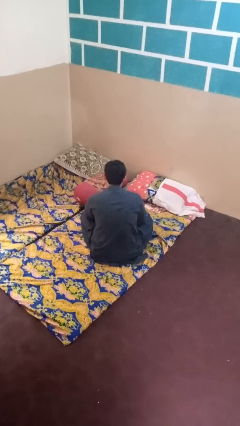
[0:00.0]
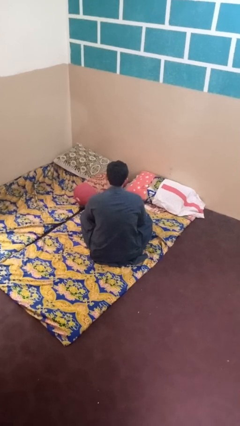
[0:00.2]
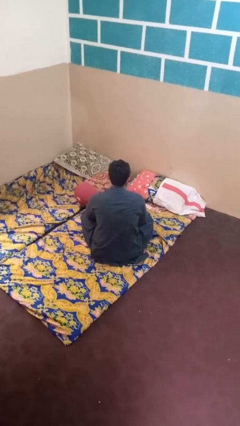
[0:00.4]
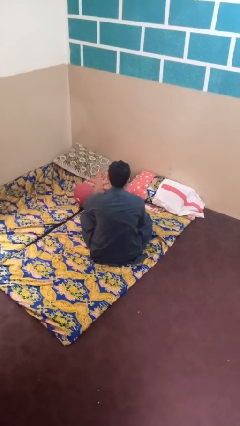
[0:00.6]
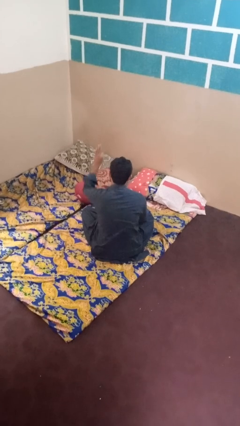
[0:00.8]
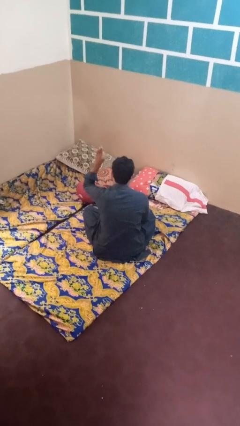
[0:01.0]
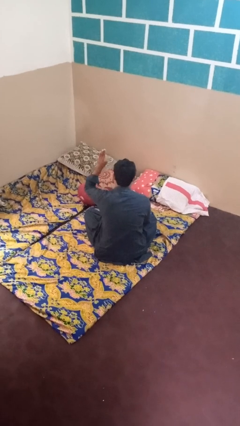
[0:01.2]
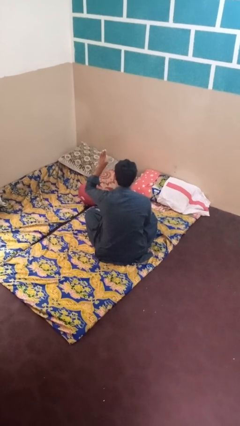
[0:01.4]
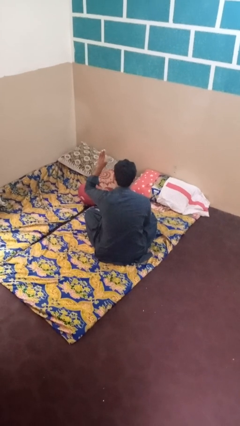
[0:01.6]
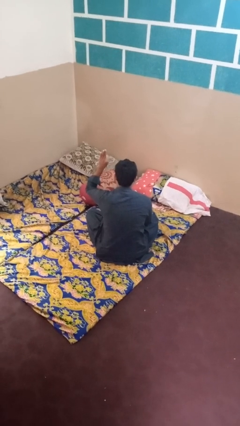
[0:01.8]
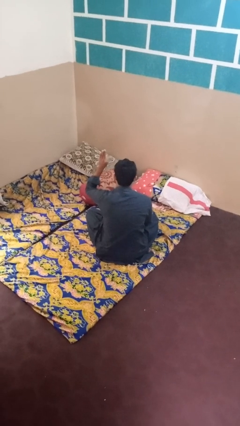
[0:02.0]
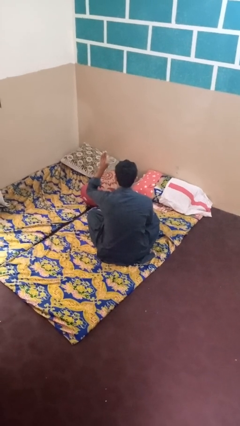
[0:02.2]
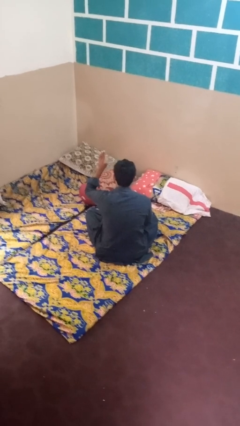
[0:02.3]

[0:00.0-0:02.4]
person gestures number three

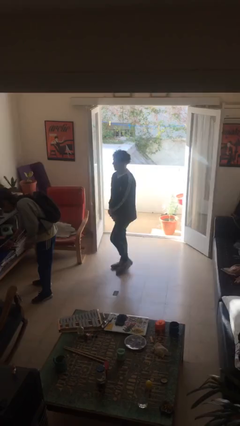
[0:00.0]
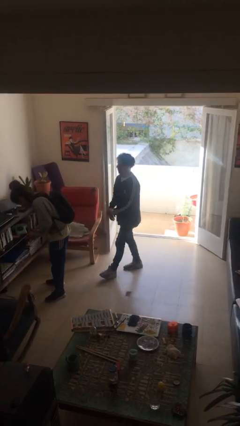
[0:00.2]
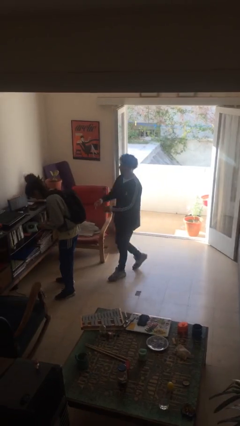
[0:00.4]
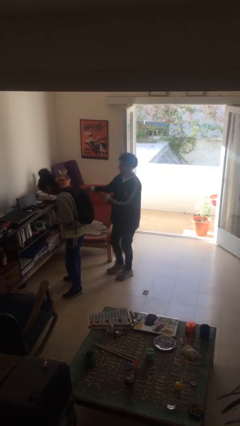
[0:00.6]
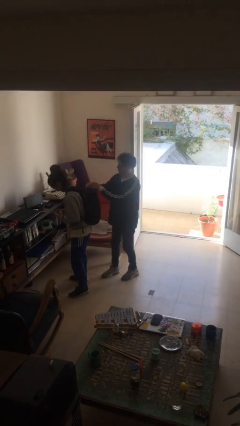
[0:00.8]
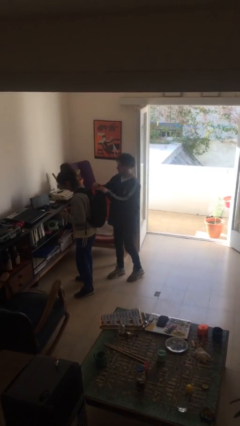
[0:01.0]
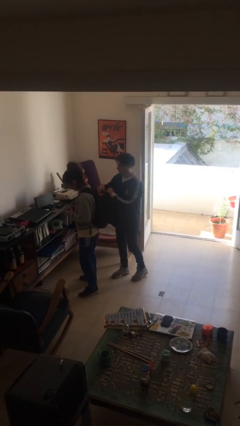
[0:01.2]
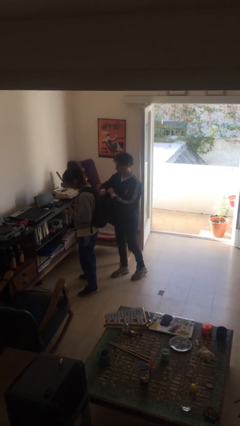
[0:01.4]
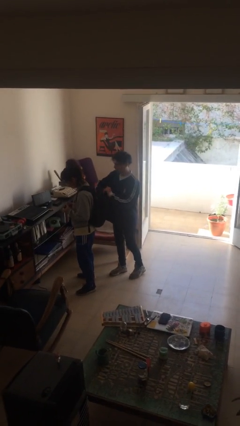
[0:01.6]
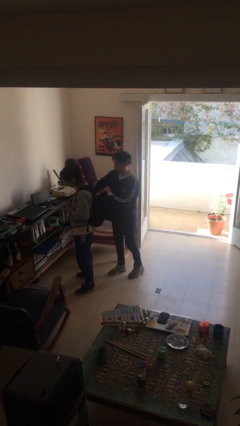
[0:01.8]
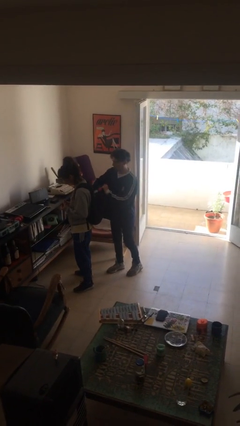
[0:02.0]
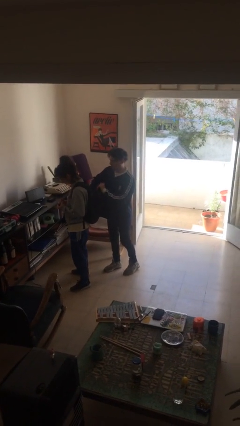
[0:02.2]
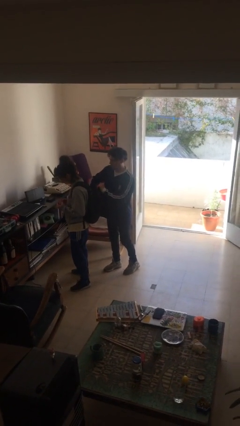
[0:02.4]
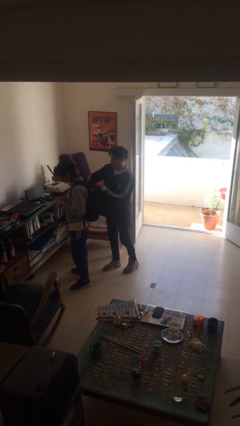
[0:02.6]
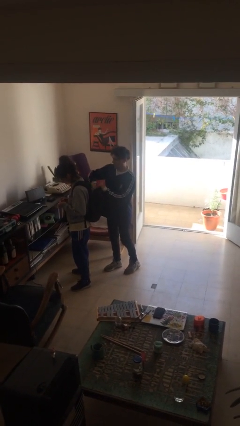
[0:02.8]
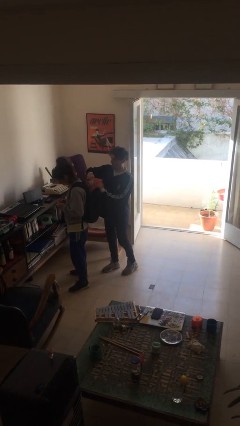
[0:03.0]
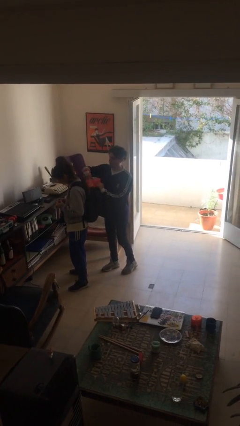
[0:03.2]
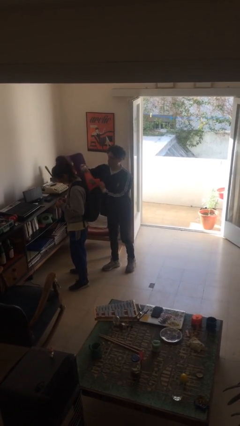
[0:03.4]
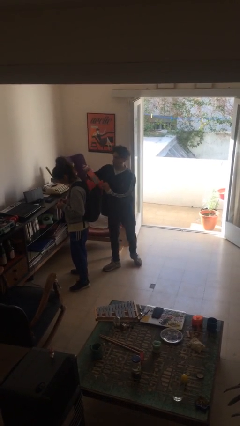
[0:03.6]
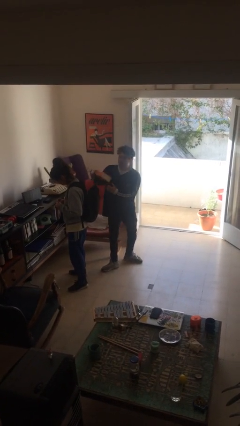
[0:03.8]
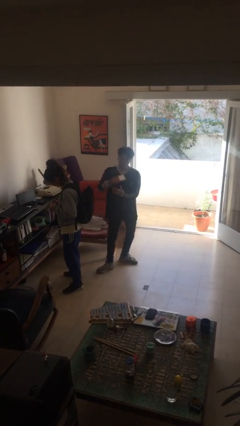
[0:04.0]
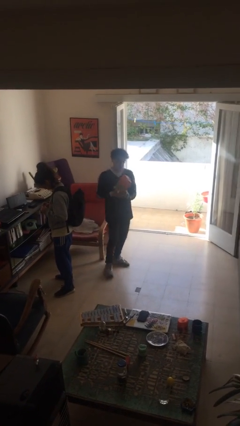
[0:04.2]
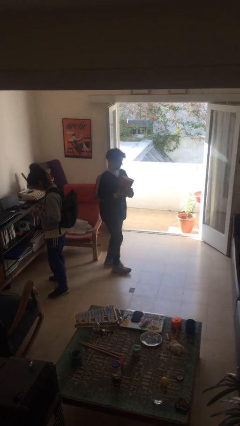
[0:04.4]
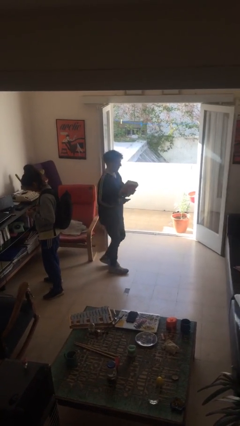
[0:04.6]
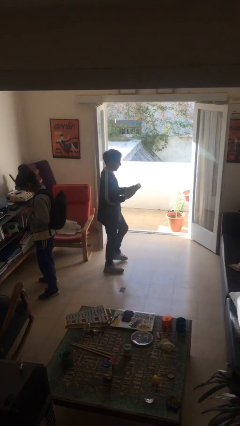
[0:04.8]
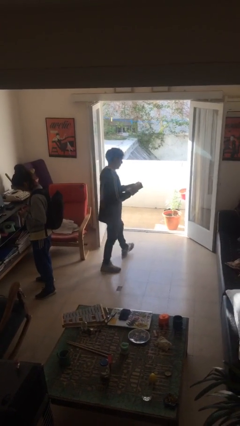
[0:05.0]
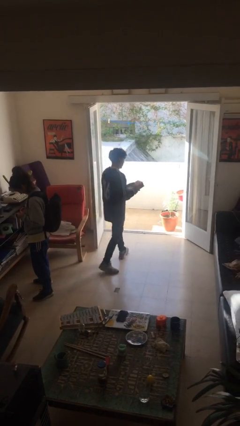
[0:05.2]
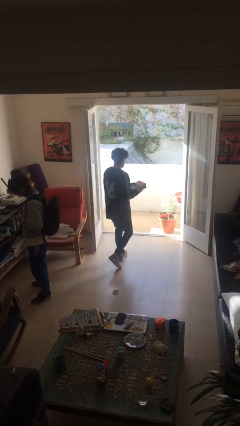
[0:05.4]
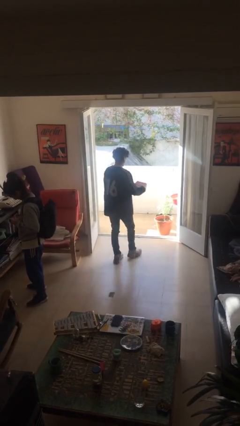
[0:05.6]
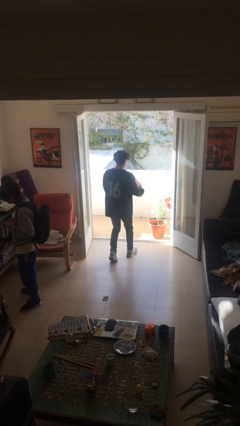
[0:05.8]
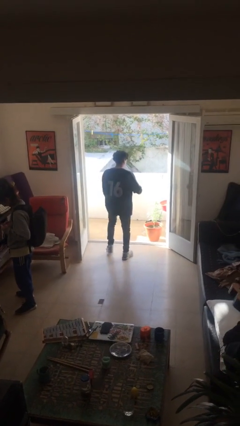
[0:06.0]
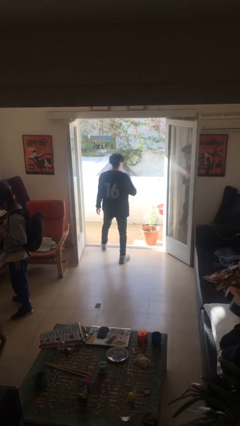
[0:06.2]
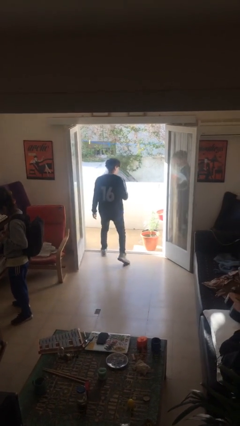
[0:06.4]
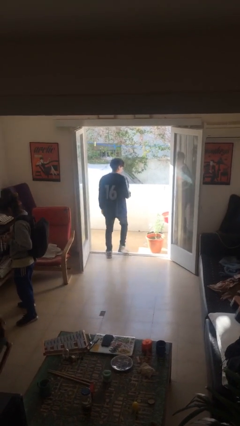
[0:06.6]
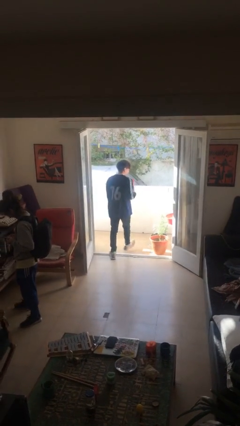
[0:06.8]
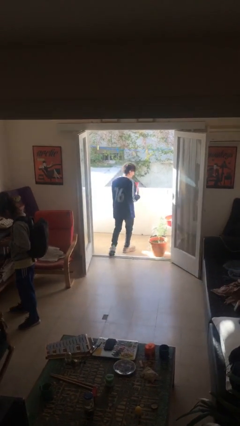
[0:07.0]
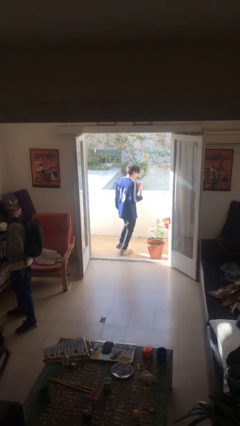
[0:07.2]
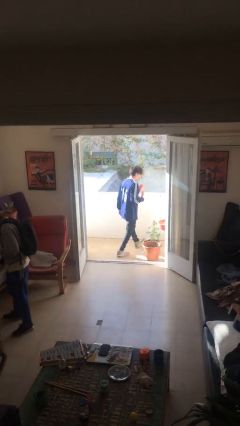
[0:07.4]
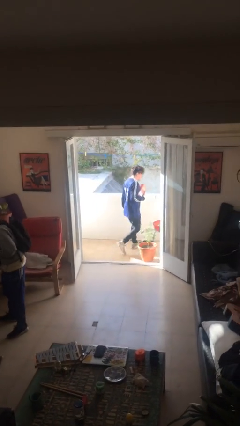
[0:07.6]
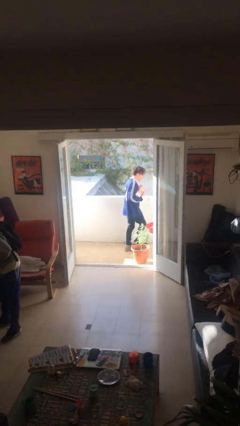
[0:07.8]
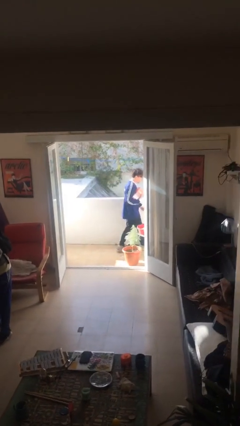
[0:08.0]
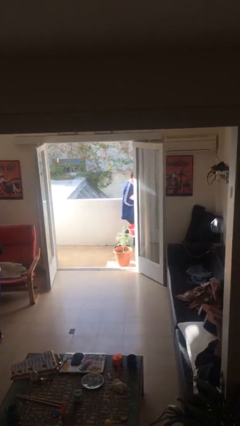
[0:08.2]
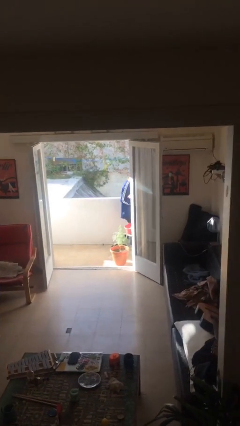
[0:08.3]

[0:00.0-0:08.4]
person steals object from person

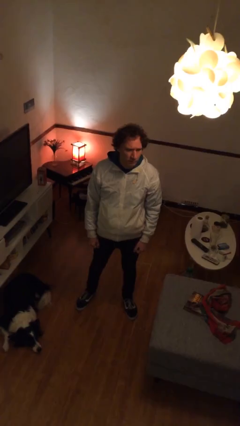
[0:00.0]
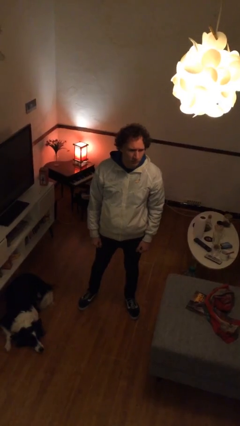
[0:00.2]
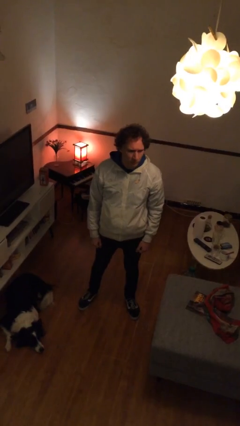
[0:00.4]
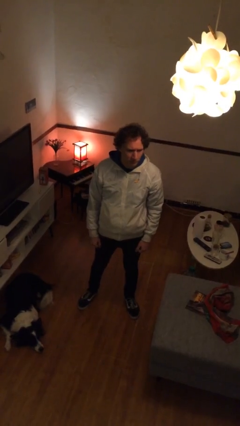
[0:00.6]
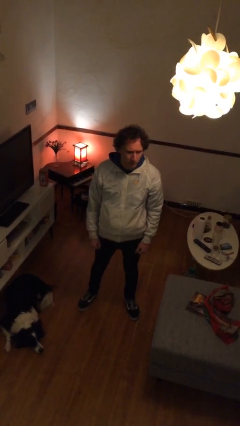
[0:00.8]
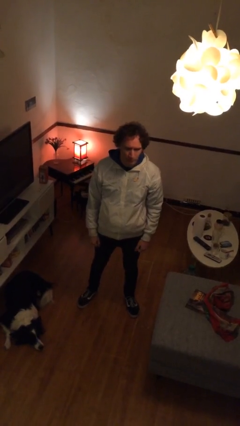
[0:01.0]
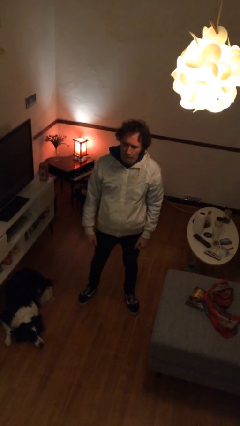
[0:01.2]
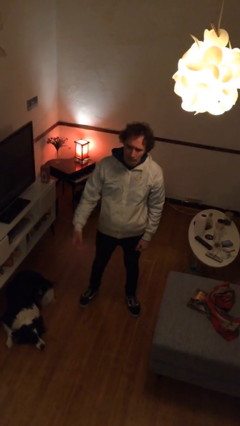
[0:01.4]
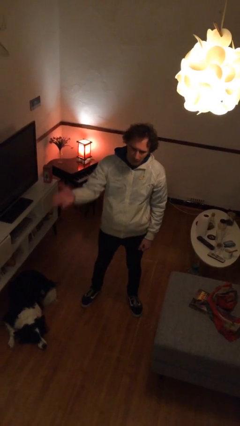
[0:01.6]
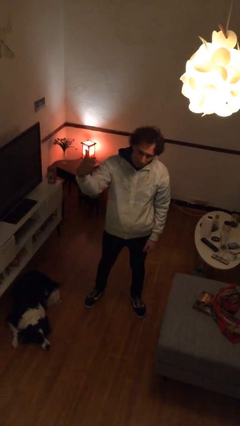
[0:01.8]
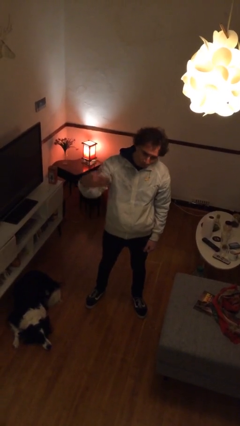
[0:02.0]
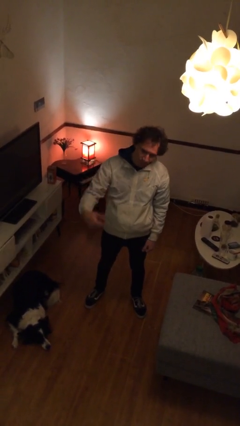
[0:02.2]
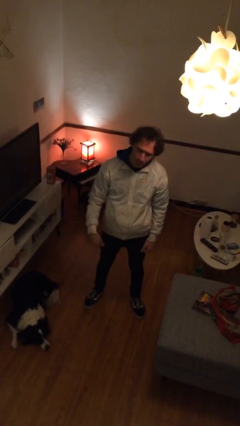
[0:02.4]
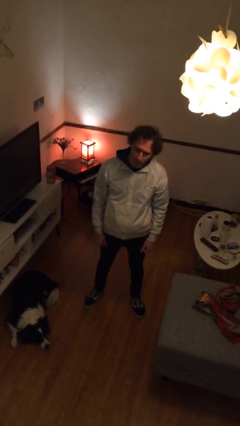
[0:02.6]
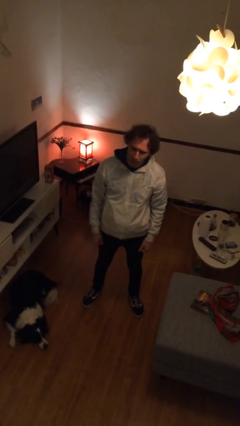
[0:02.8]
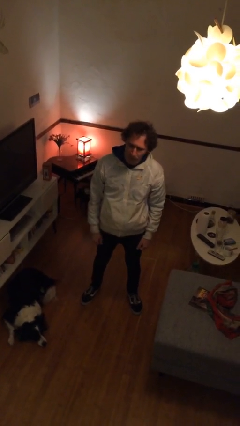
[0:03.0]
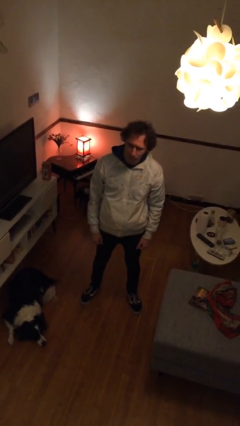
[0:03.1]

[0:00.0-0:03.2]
person gestures come here

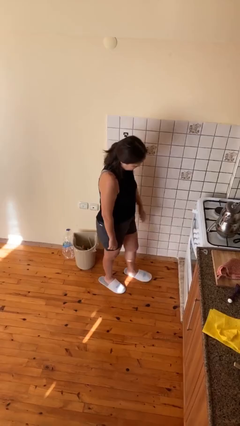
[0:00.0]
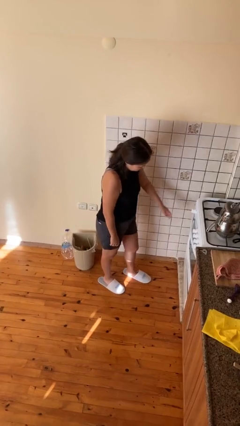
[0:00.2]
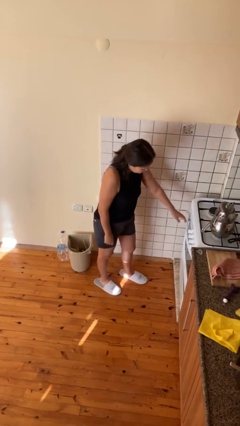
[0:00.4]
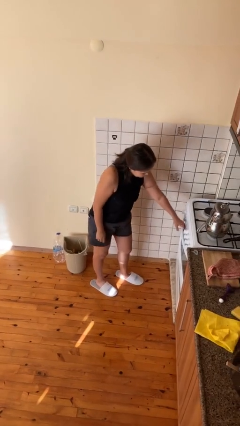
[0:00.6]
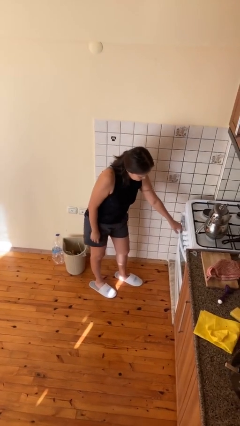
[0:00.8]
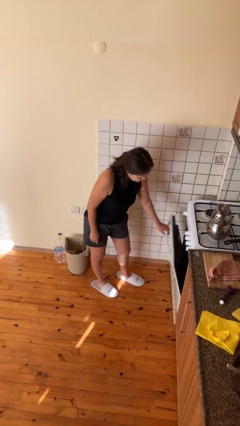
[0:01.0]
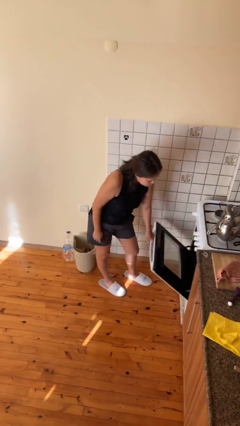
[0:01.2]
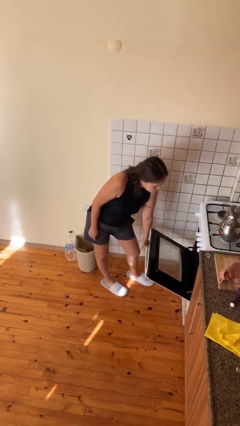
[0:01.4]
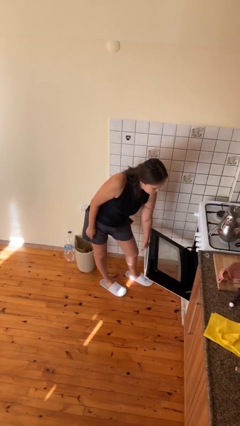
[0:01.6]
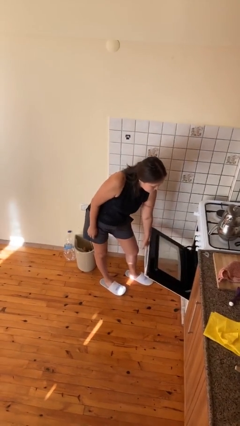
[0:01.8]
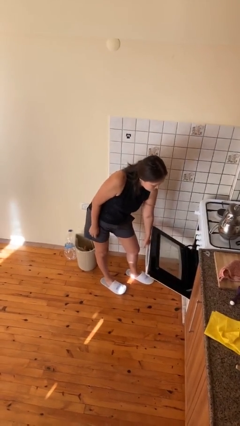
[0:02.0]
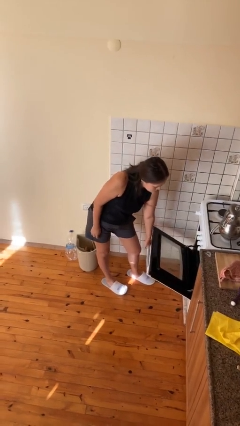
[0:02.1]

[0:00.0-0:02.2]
person opens oven door

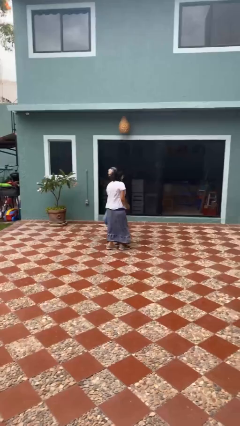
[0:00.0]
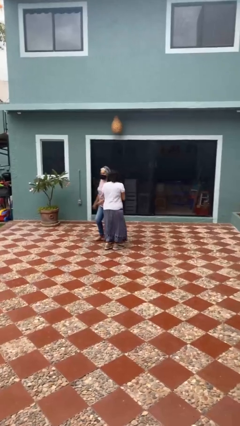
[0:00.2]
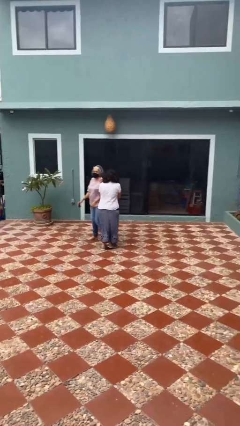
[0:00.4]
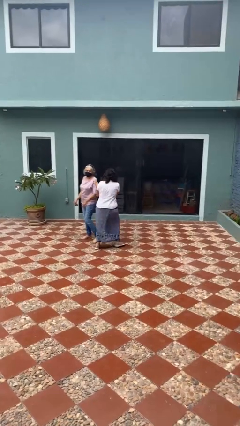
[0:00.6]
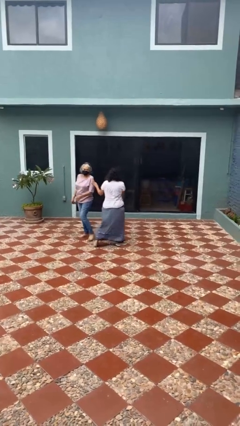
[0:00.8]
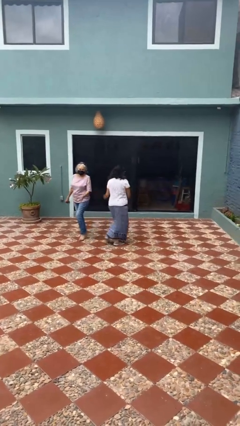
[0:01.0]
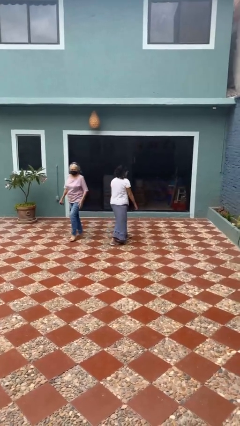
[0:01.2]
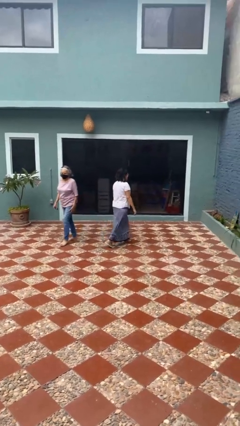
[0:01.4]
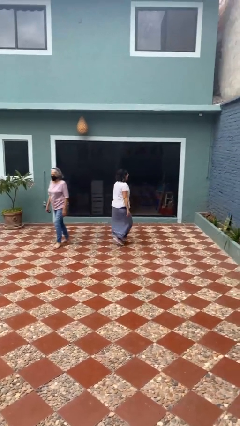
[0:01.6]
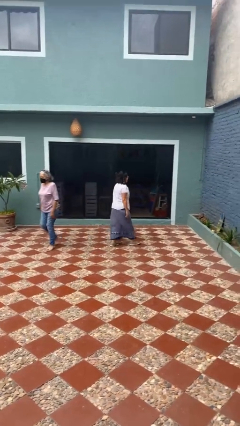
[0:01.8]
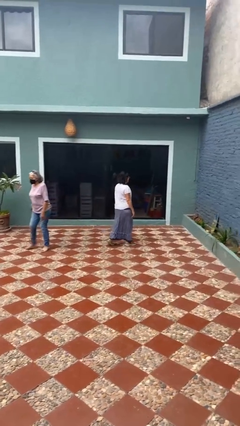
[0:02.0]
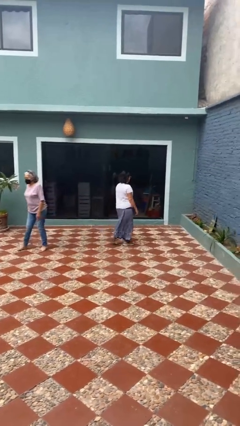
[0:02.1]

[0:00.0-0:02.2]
person bumps into person
